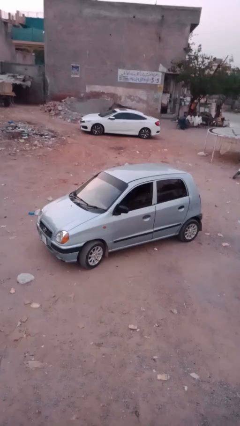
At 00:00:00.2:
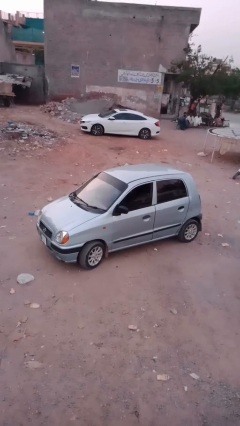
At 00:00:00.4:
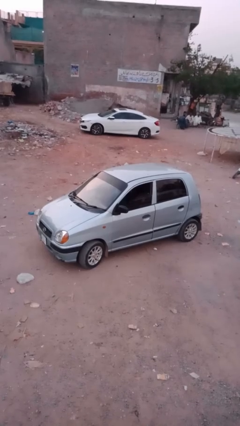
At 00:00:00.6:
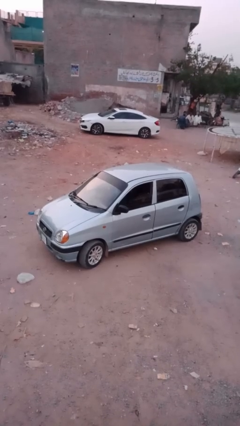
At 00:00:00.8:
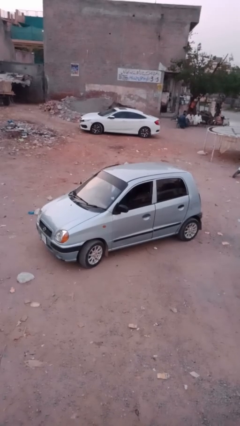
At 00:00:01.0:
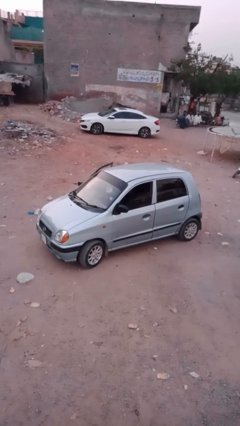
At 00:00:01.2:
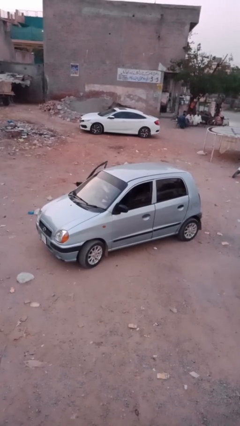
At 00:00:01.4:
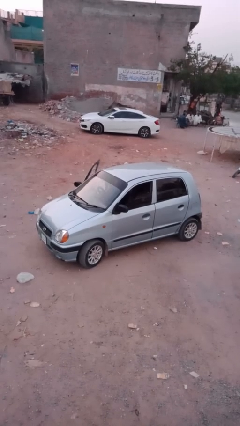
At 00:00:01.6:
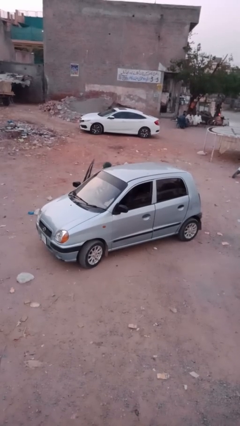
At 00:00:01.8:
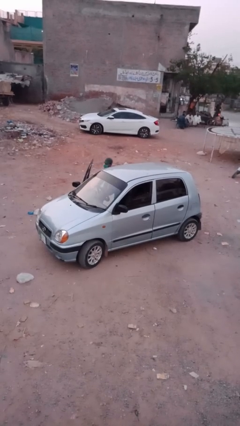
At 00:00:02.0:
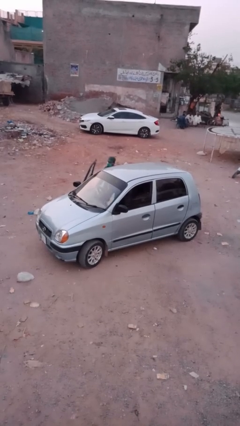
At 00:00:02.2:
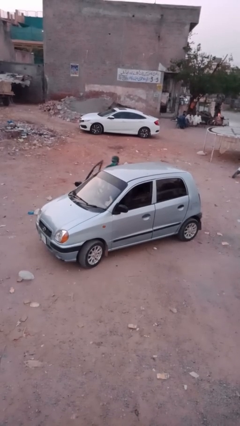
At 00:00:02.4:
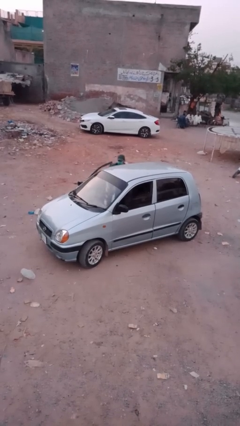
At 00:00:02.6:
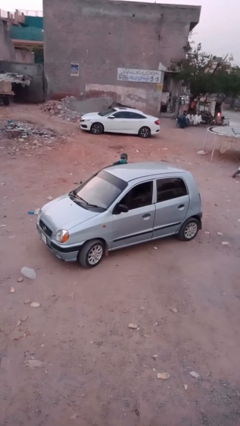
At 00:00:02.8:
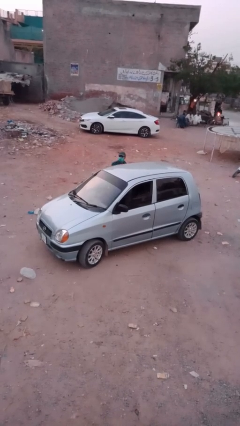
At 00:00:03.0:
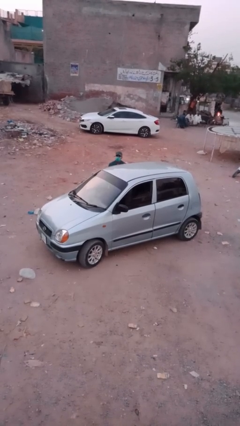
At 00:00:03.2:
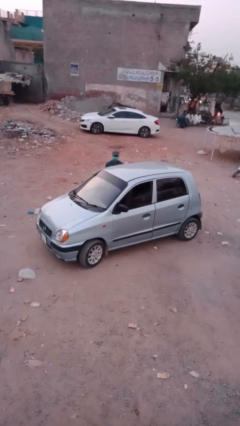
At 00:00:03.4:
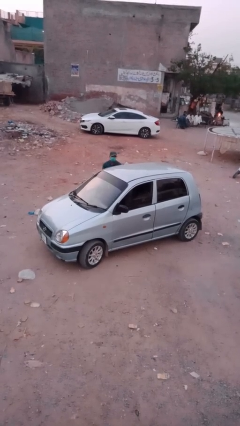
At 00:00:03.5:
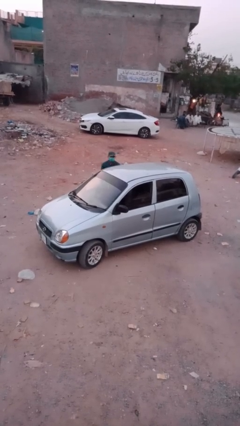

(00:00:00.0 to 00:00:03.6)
car drops off person

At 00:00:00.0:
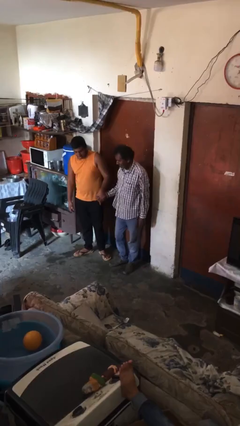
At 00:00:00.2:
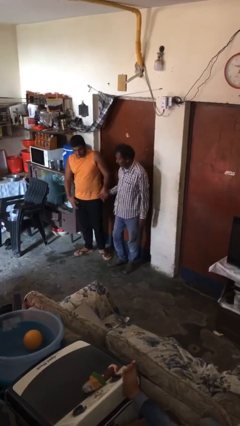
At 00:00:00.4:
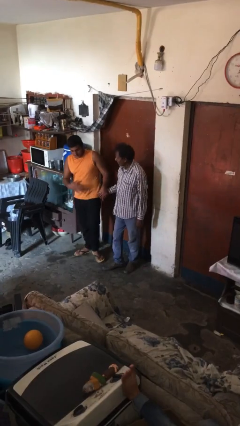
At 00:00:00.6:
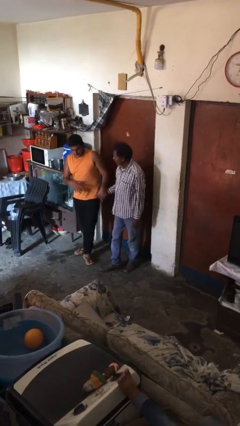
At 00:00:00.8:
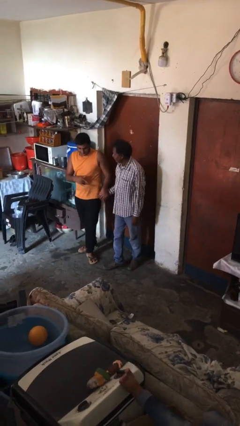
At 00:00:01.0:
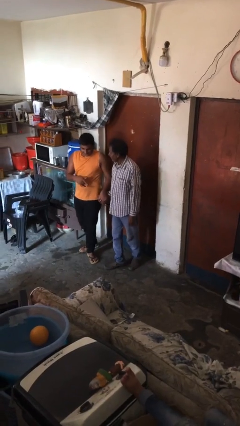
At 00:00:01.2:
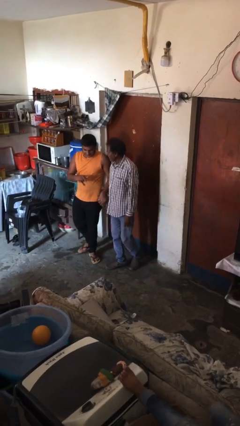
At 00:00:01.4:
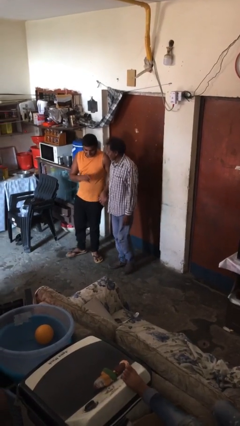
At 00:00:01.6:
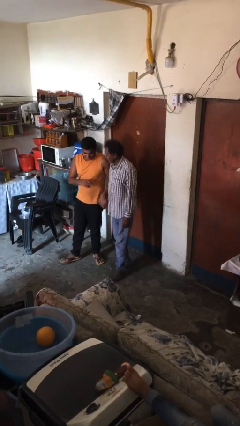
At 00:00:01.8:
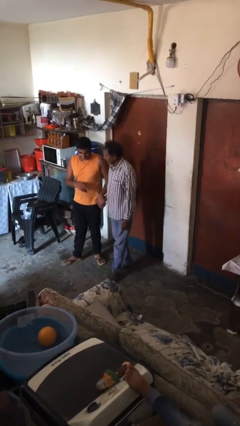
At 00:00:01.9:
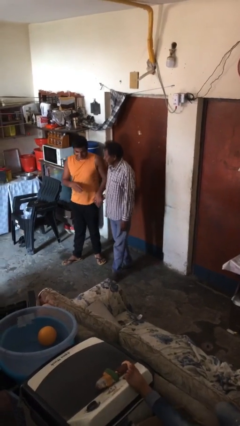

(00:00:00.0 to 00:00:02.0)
person holds hand

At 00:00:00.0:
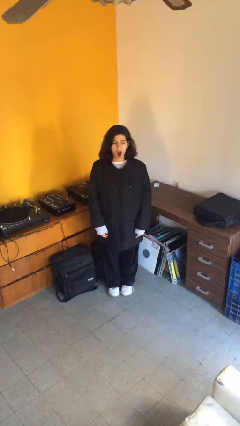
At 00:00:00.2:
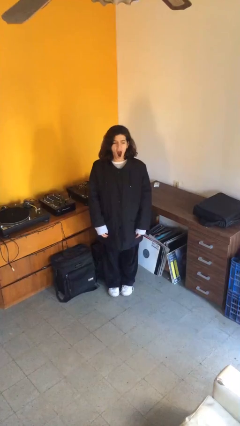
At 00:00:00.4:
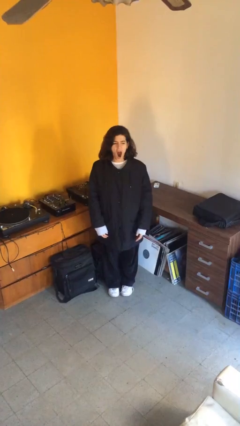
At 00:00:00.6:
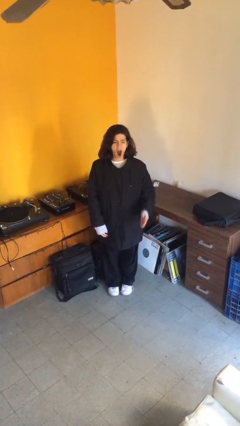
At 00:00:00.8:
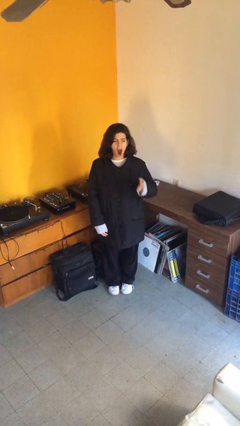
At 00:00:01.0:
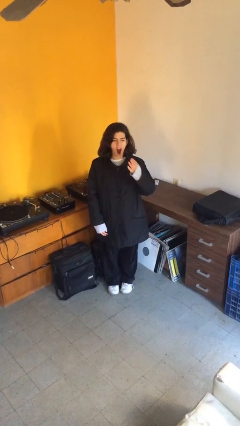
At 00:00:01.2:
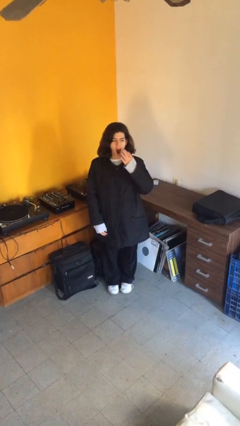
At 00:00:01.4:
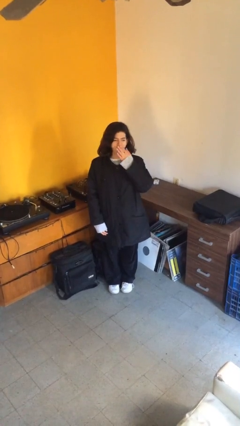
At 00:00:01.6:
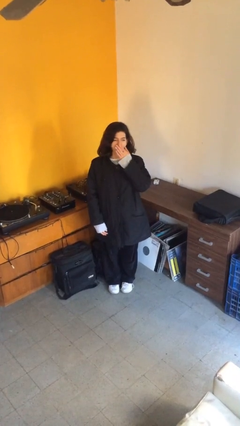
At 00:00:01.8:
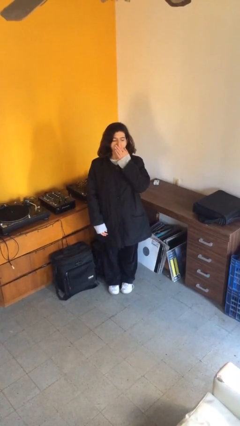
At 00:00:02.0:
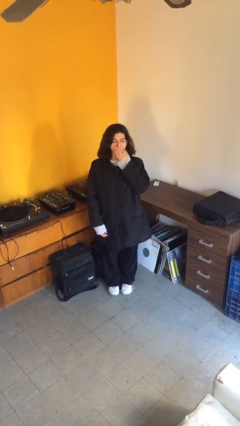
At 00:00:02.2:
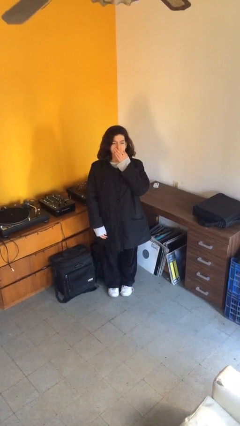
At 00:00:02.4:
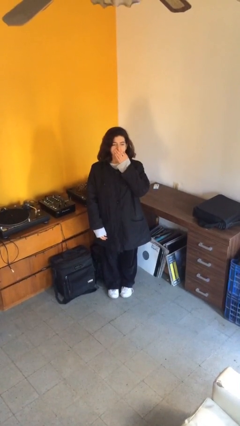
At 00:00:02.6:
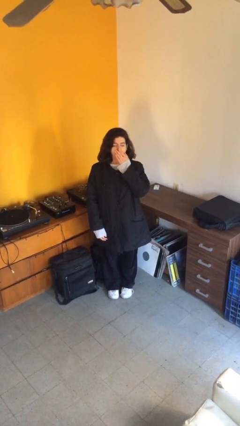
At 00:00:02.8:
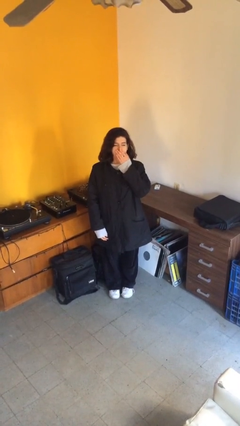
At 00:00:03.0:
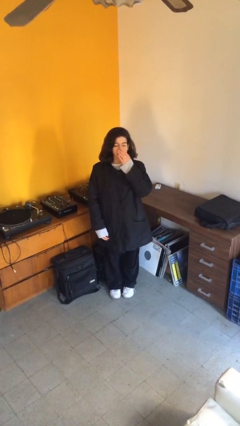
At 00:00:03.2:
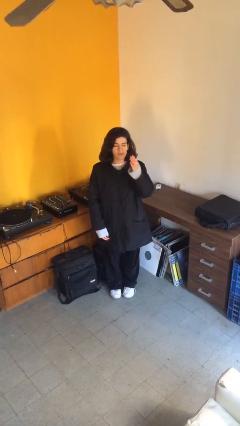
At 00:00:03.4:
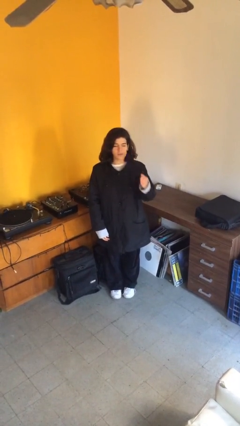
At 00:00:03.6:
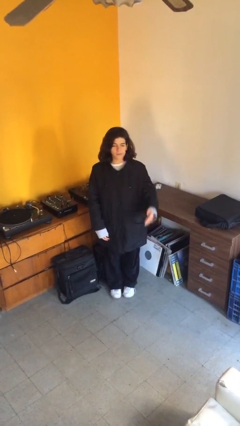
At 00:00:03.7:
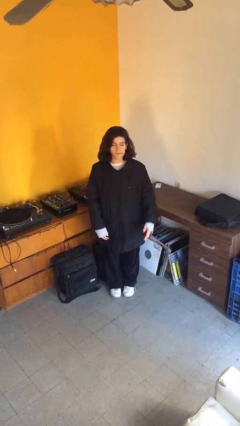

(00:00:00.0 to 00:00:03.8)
person yawns

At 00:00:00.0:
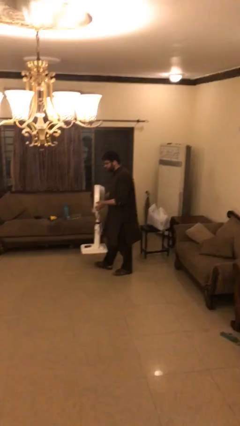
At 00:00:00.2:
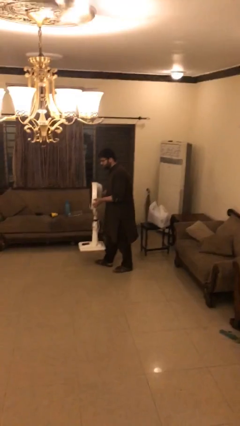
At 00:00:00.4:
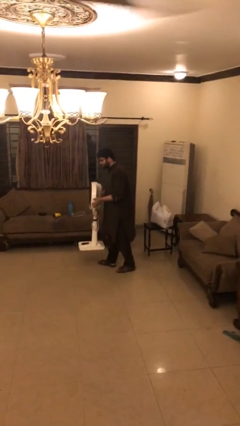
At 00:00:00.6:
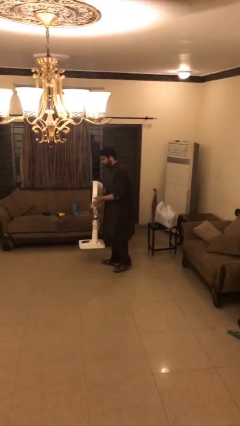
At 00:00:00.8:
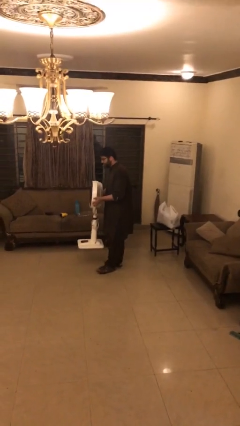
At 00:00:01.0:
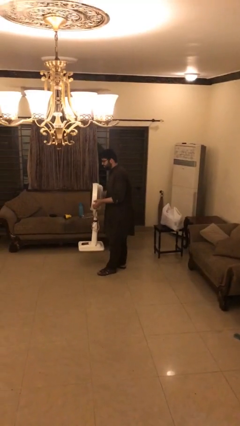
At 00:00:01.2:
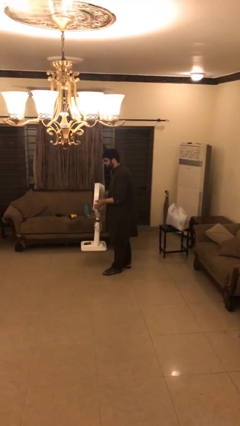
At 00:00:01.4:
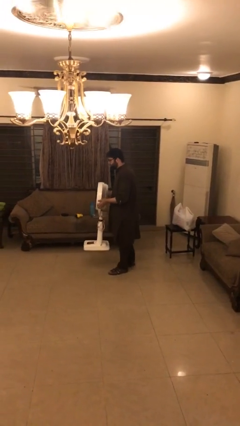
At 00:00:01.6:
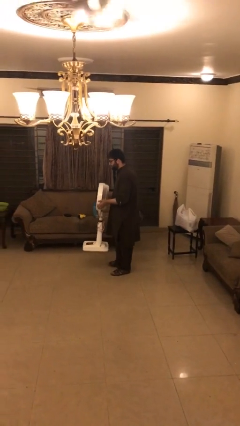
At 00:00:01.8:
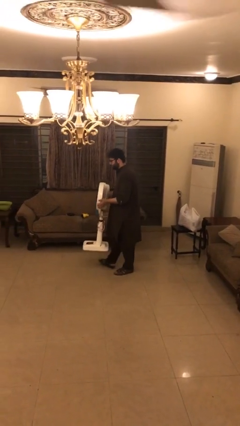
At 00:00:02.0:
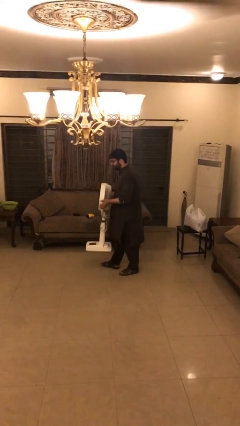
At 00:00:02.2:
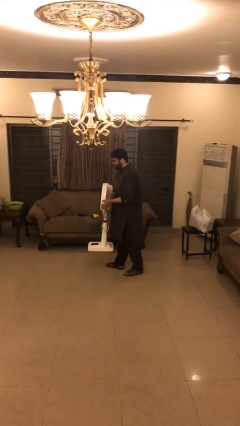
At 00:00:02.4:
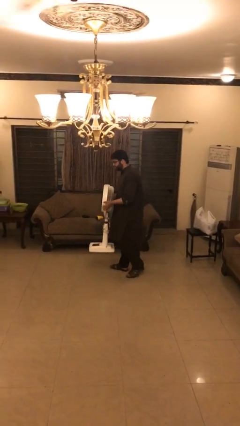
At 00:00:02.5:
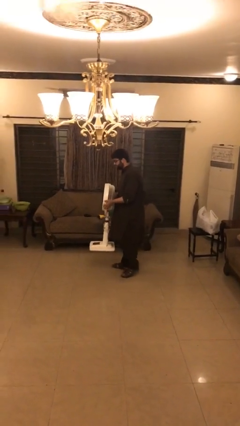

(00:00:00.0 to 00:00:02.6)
person carries heavy object

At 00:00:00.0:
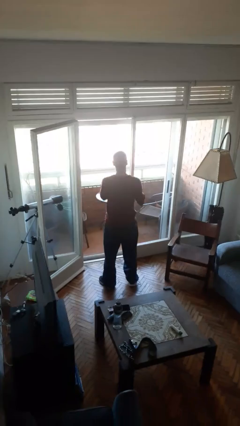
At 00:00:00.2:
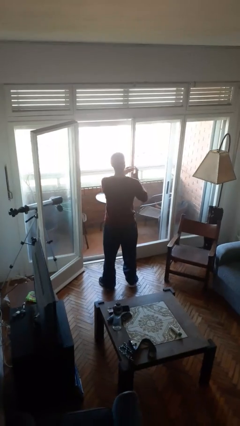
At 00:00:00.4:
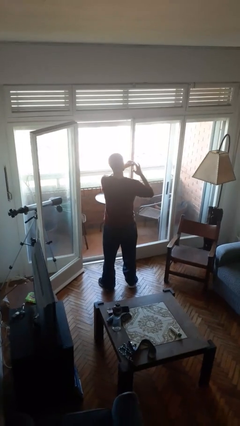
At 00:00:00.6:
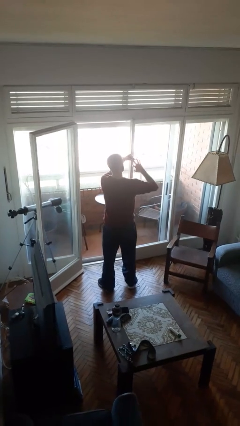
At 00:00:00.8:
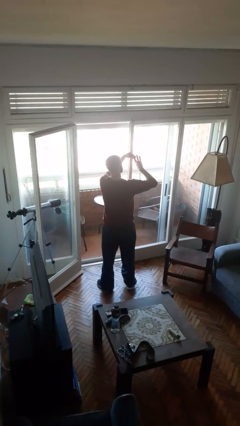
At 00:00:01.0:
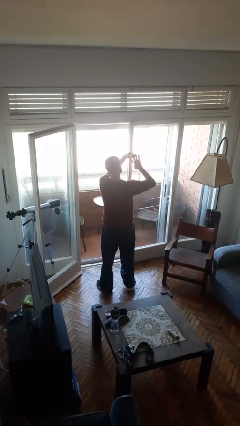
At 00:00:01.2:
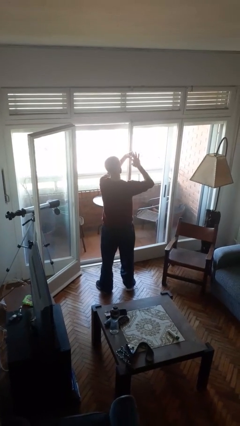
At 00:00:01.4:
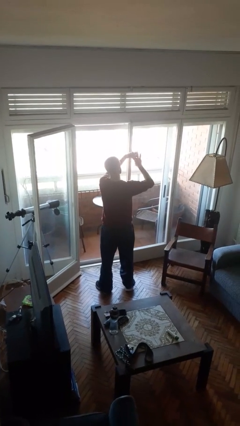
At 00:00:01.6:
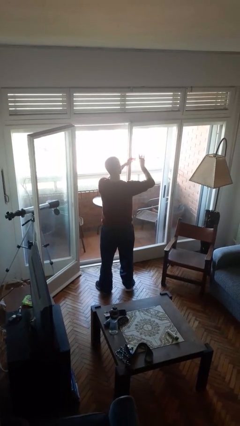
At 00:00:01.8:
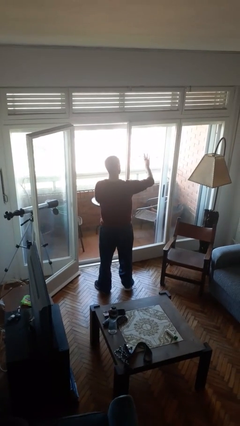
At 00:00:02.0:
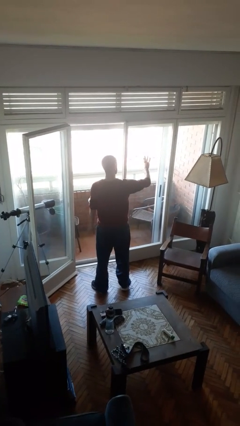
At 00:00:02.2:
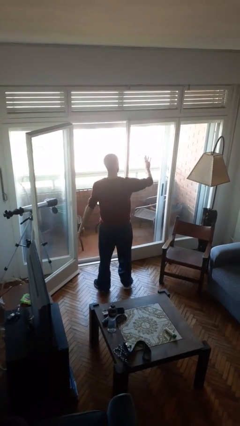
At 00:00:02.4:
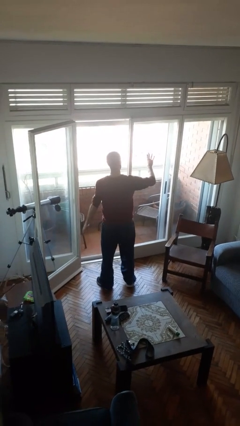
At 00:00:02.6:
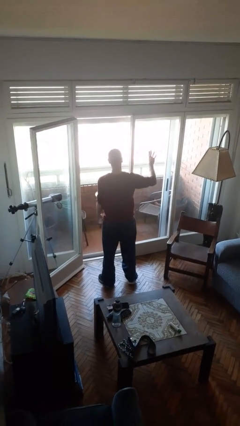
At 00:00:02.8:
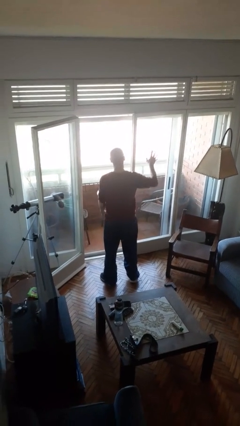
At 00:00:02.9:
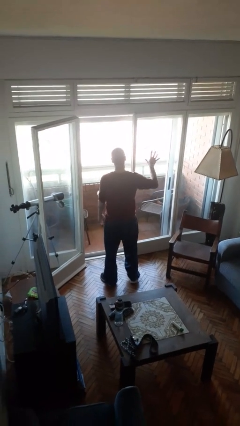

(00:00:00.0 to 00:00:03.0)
person puts on ring

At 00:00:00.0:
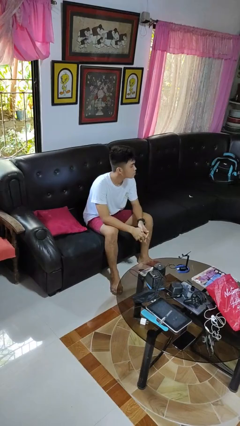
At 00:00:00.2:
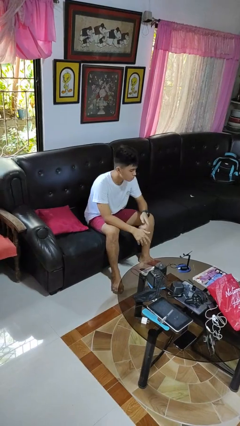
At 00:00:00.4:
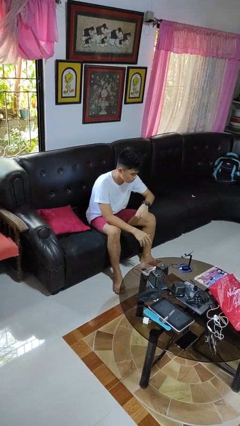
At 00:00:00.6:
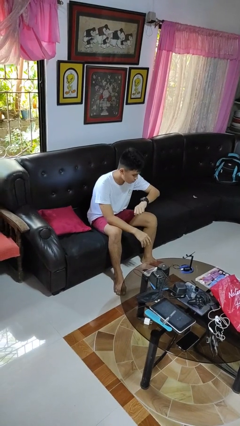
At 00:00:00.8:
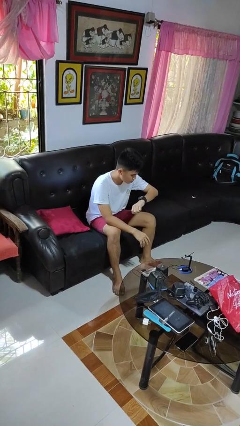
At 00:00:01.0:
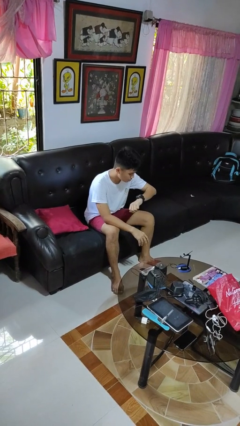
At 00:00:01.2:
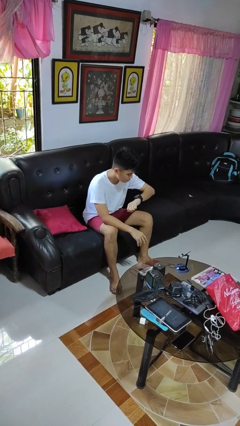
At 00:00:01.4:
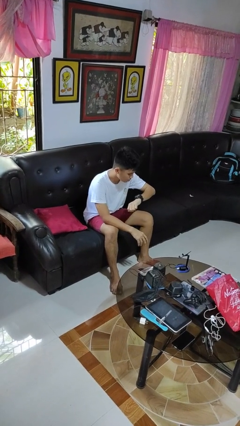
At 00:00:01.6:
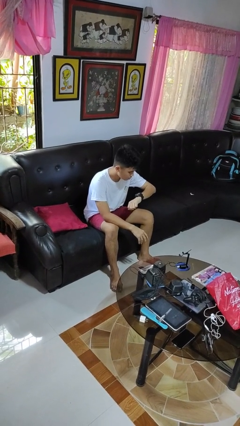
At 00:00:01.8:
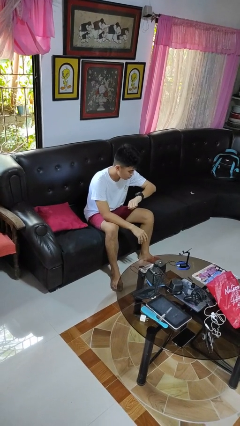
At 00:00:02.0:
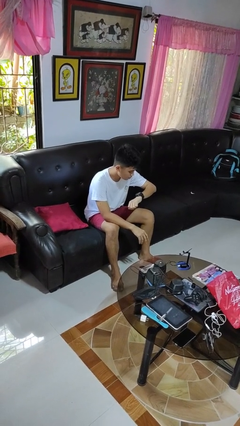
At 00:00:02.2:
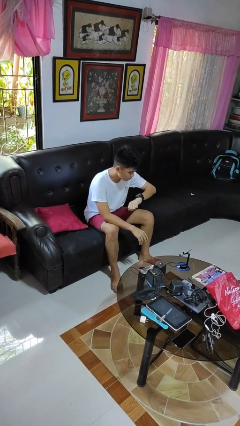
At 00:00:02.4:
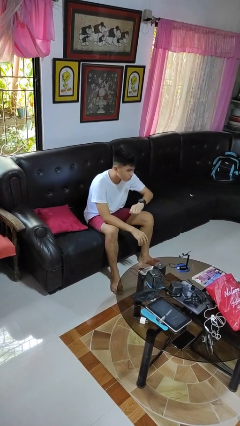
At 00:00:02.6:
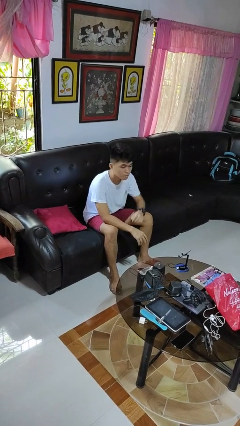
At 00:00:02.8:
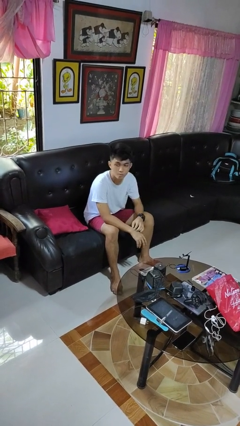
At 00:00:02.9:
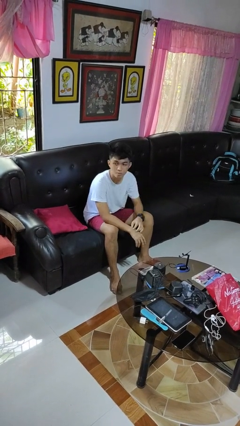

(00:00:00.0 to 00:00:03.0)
person looks at wristwatch
